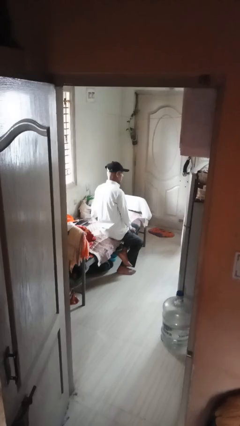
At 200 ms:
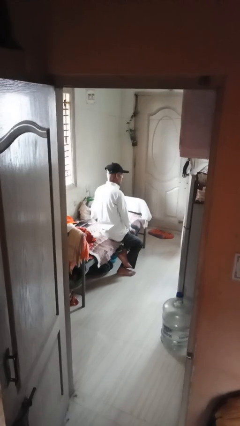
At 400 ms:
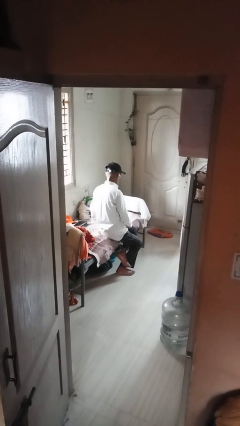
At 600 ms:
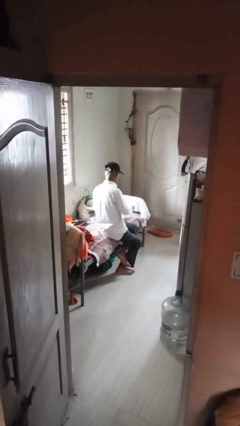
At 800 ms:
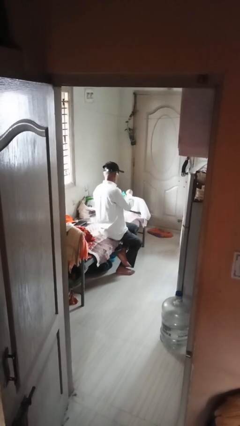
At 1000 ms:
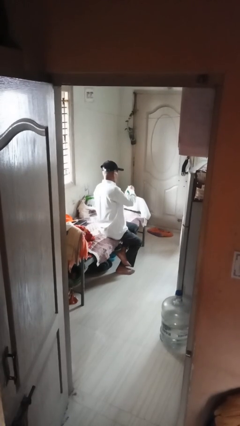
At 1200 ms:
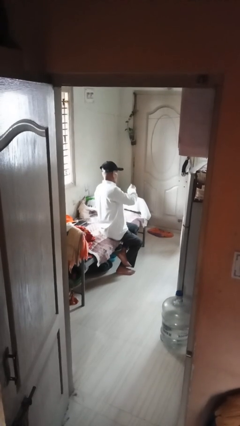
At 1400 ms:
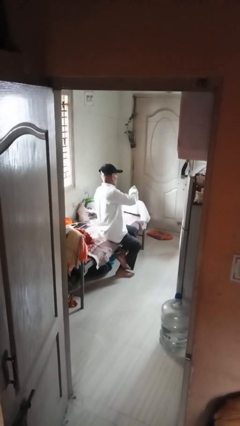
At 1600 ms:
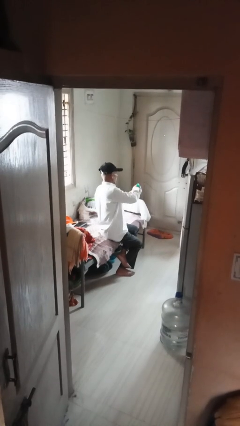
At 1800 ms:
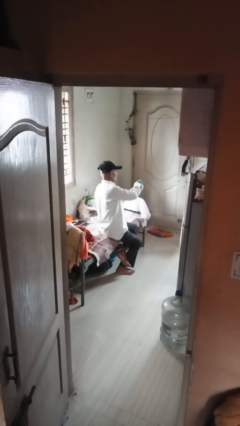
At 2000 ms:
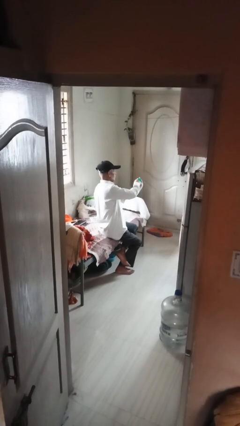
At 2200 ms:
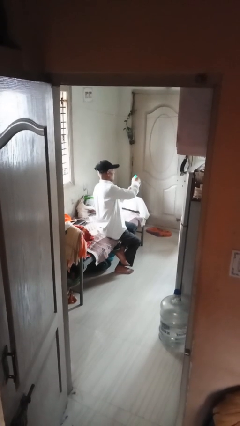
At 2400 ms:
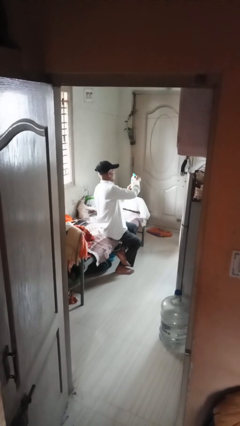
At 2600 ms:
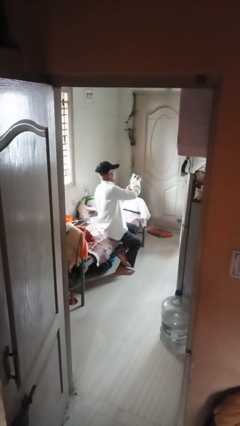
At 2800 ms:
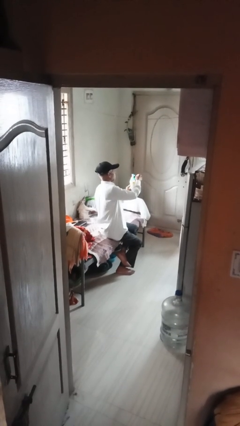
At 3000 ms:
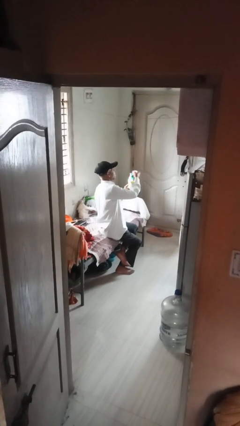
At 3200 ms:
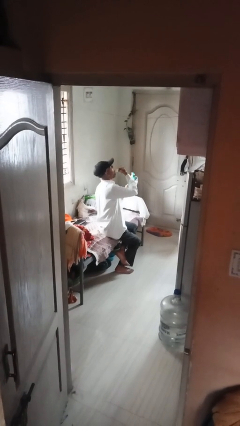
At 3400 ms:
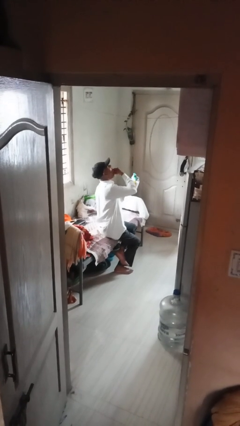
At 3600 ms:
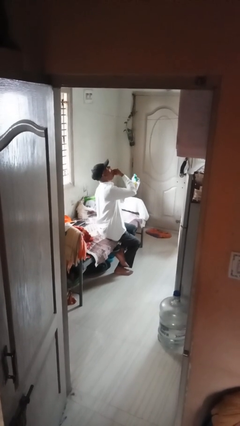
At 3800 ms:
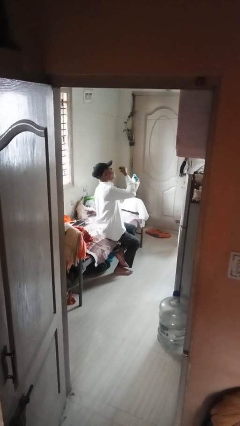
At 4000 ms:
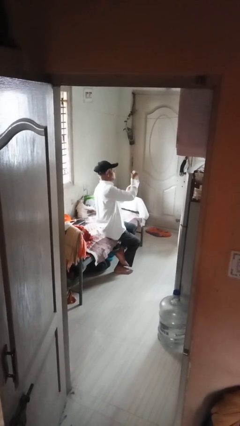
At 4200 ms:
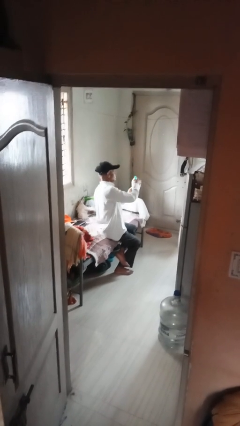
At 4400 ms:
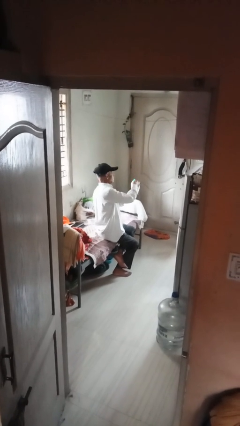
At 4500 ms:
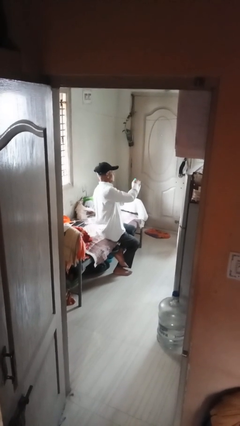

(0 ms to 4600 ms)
person eats snack from bag

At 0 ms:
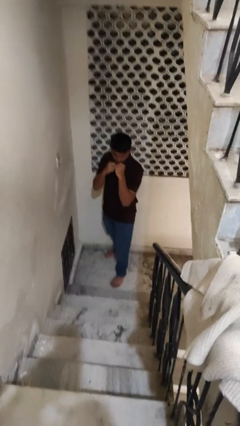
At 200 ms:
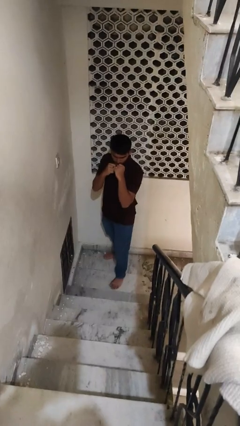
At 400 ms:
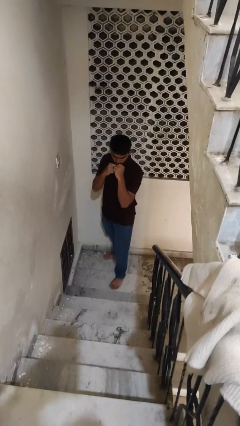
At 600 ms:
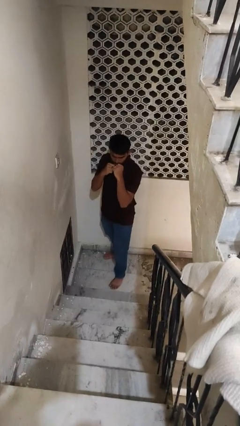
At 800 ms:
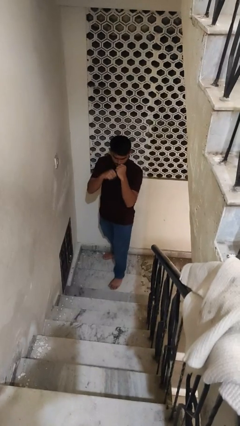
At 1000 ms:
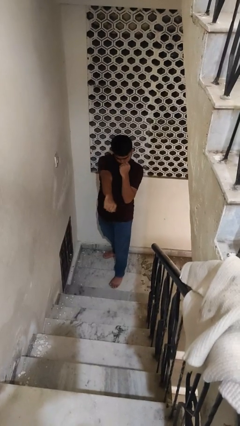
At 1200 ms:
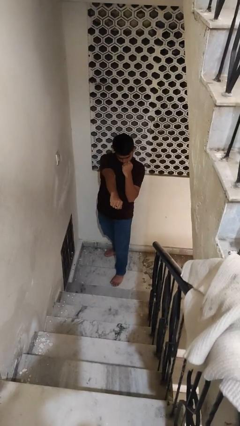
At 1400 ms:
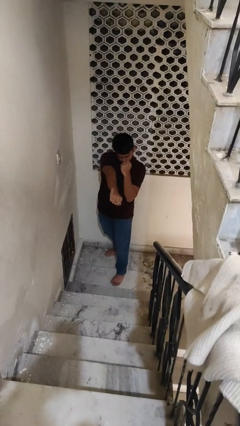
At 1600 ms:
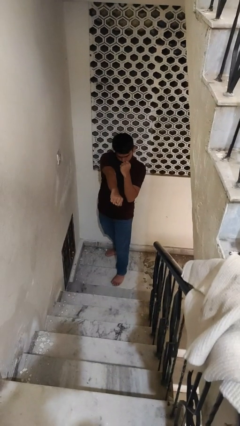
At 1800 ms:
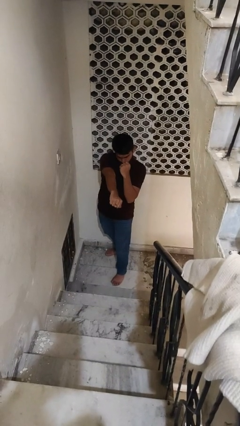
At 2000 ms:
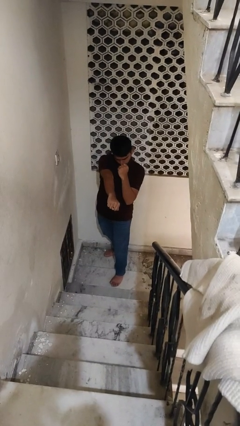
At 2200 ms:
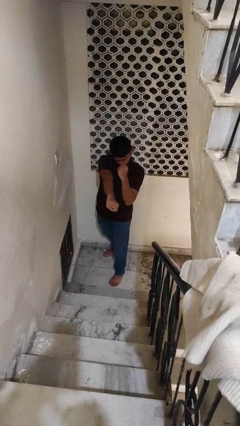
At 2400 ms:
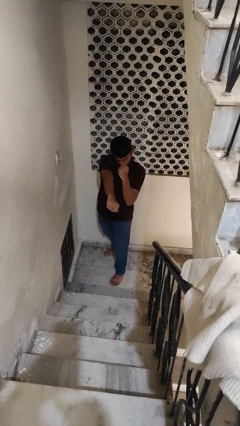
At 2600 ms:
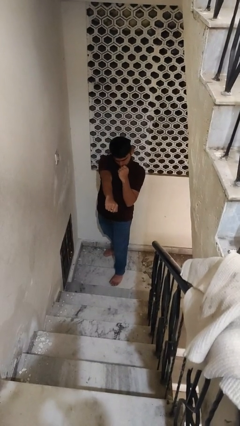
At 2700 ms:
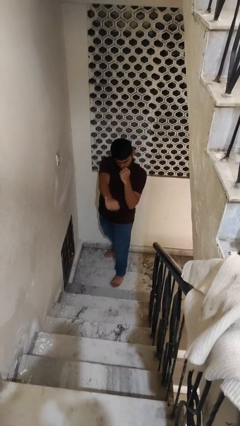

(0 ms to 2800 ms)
person punches

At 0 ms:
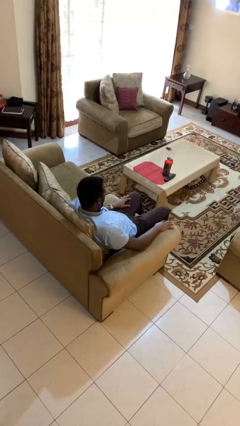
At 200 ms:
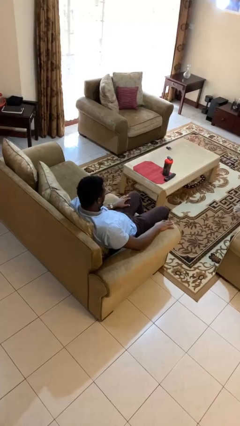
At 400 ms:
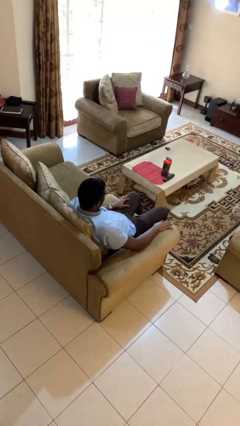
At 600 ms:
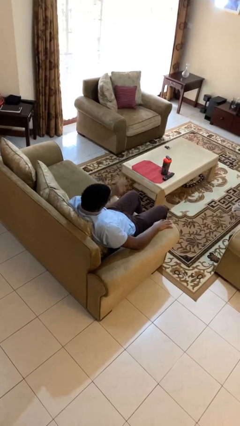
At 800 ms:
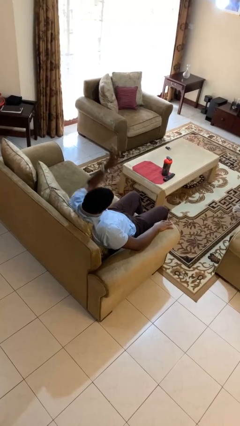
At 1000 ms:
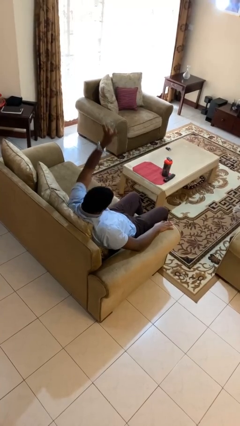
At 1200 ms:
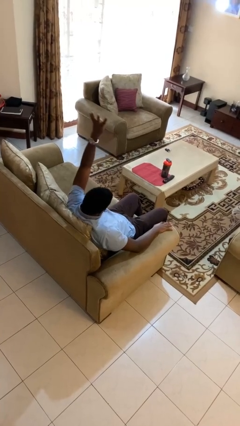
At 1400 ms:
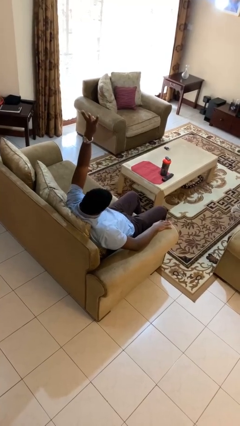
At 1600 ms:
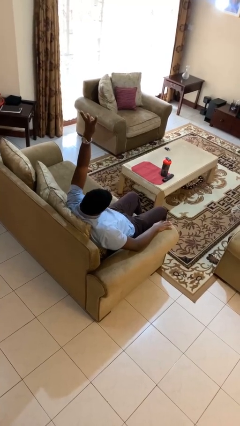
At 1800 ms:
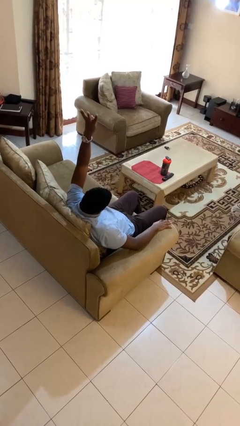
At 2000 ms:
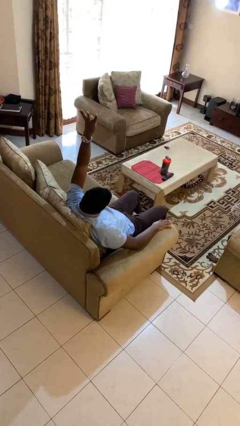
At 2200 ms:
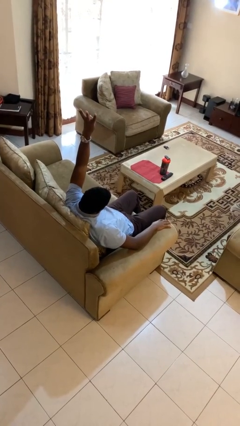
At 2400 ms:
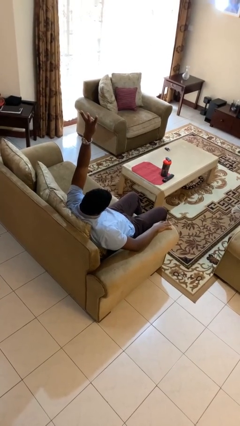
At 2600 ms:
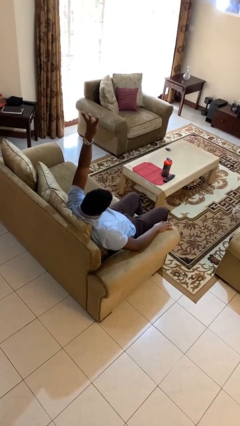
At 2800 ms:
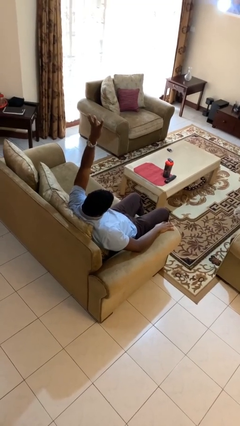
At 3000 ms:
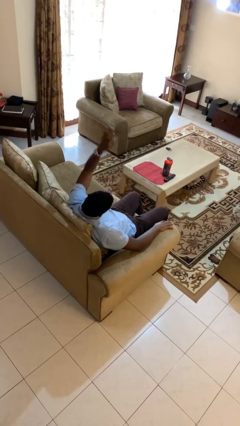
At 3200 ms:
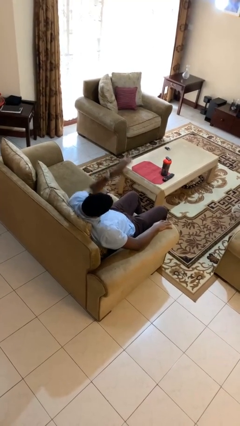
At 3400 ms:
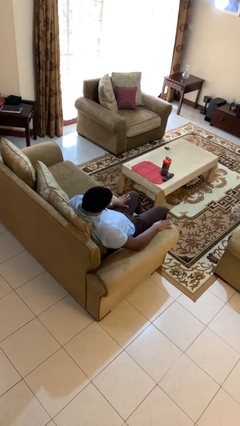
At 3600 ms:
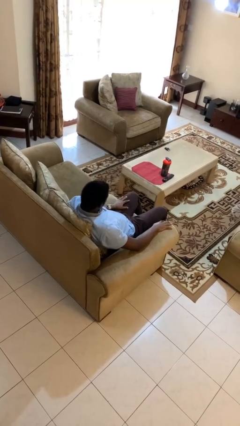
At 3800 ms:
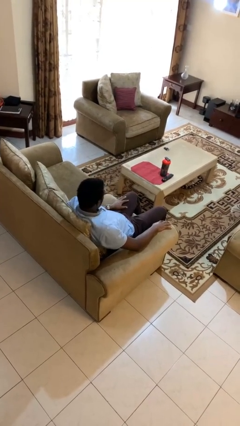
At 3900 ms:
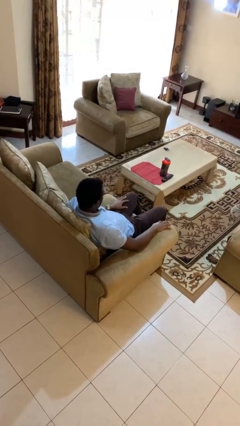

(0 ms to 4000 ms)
person gestures number four

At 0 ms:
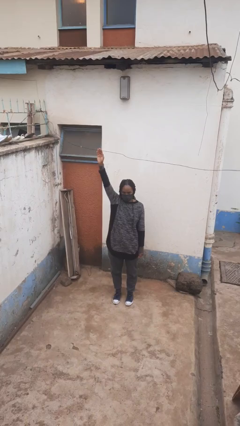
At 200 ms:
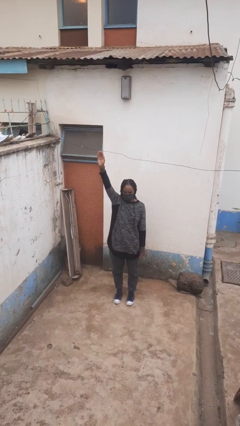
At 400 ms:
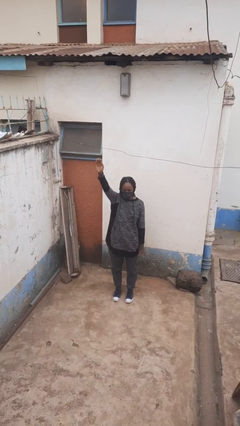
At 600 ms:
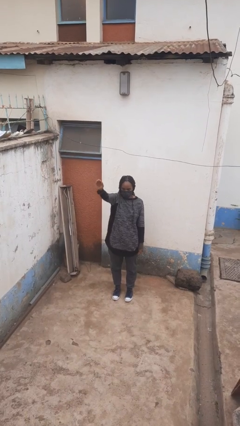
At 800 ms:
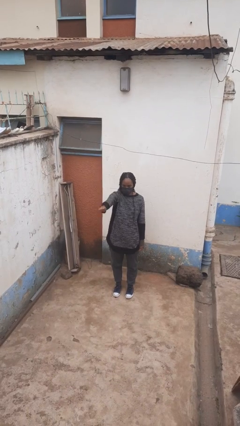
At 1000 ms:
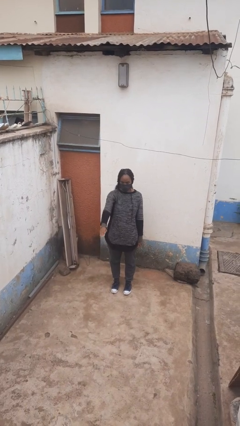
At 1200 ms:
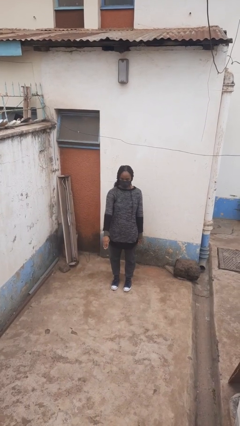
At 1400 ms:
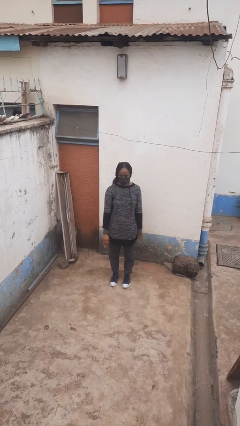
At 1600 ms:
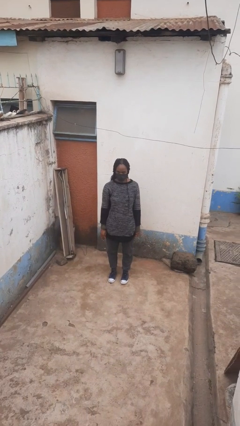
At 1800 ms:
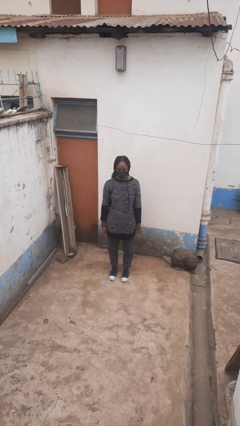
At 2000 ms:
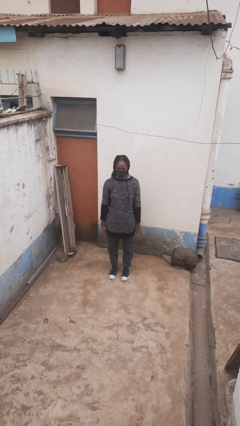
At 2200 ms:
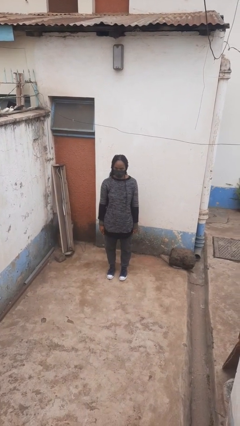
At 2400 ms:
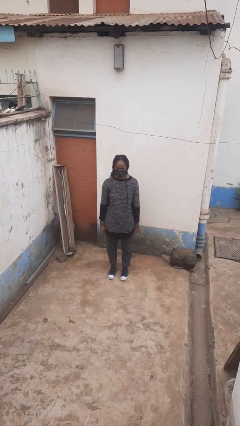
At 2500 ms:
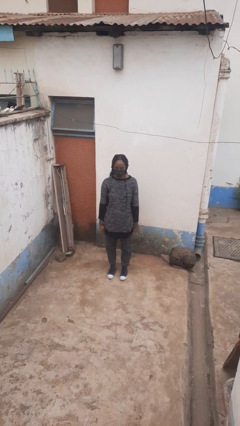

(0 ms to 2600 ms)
person gestures lower hand

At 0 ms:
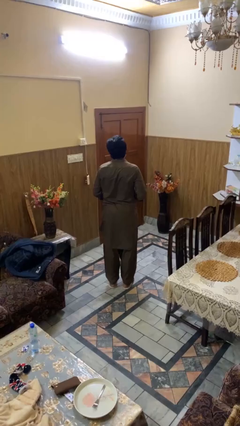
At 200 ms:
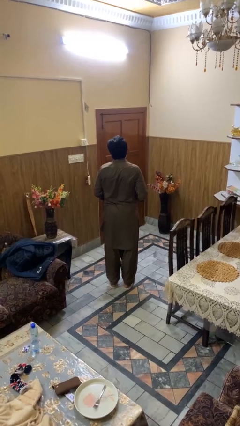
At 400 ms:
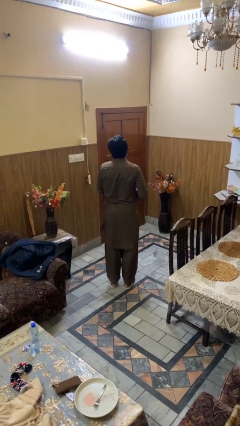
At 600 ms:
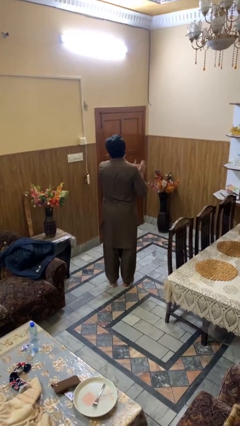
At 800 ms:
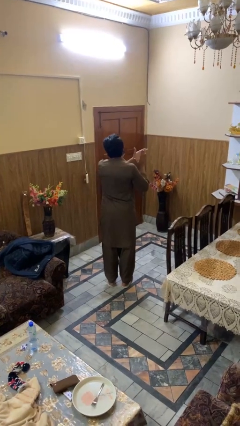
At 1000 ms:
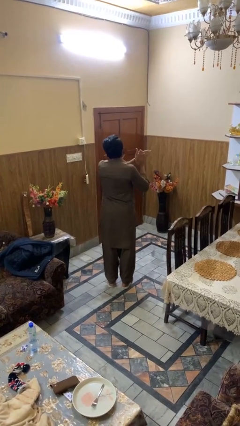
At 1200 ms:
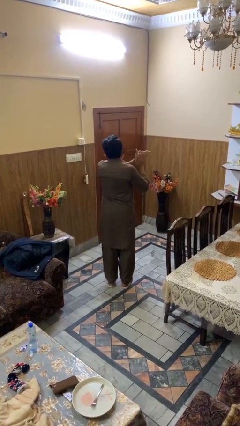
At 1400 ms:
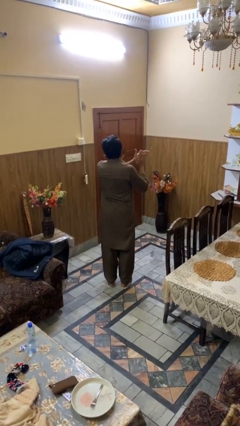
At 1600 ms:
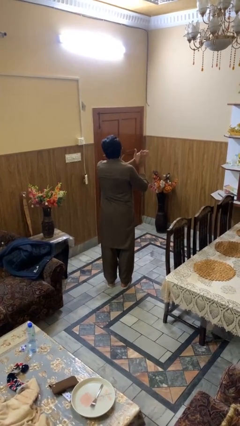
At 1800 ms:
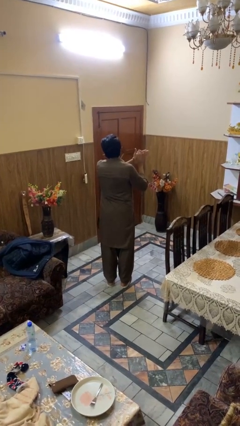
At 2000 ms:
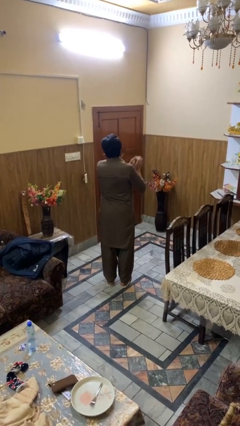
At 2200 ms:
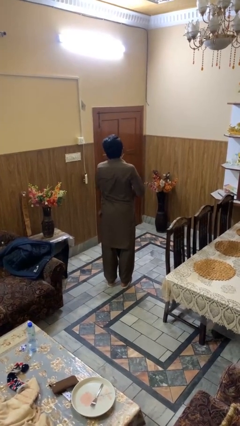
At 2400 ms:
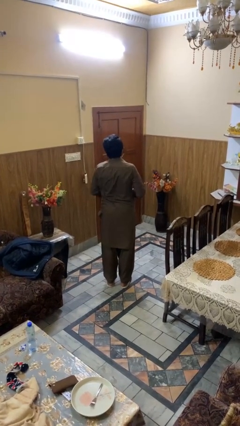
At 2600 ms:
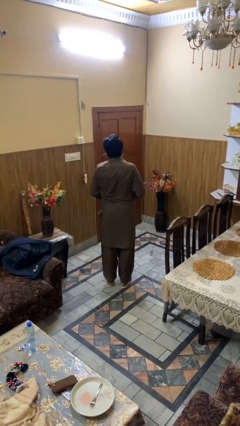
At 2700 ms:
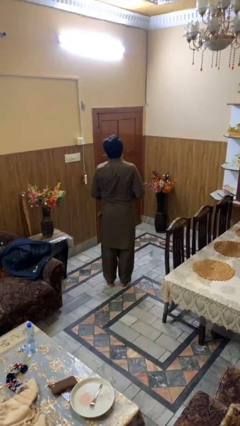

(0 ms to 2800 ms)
person claps hands

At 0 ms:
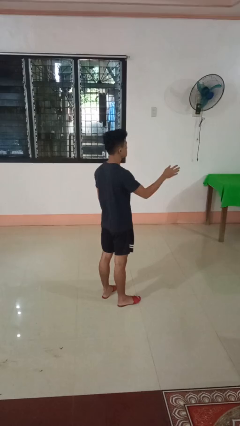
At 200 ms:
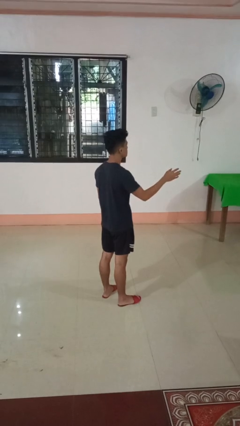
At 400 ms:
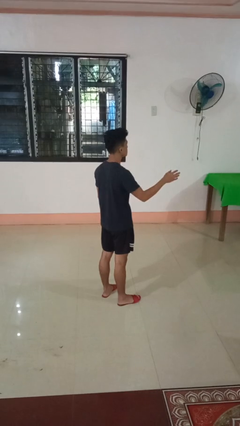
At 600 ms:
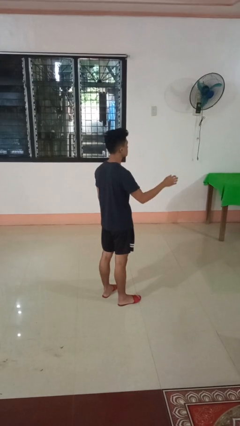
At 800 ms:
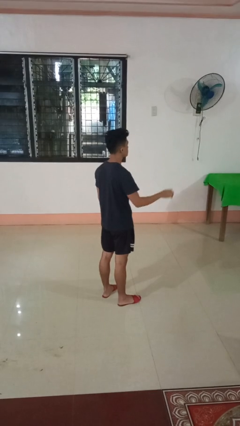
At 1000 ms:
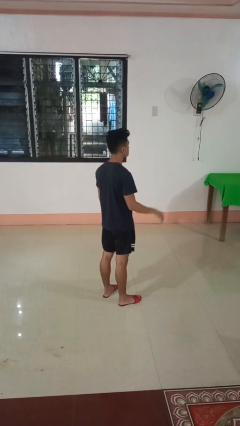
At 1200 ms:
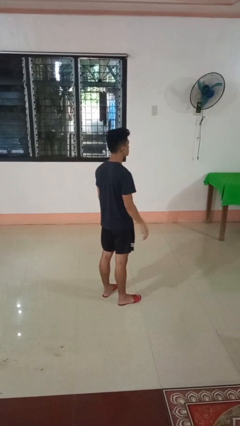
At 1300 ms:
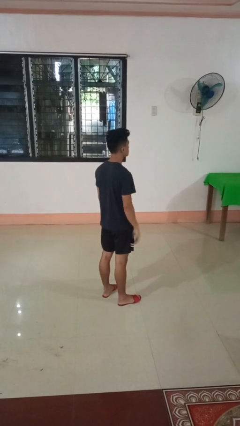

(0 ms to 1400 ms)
person gestures swipe right
